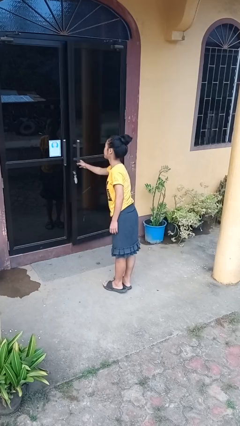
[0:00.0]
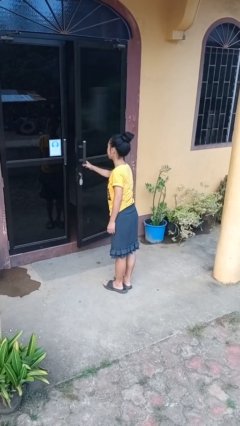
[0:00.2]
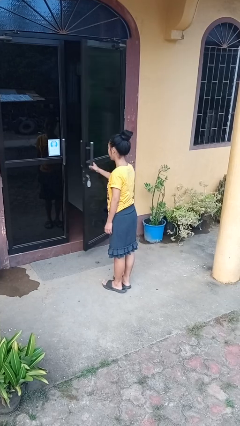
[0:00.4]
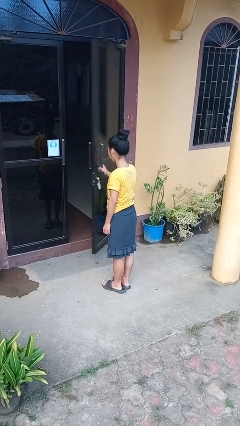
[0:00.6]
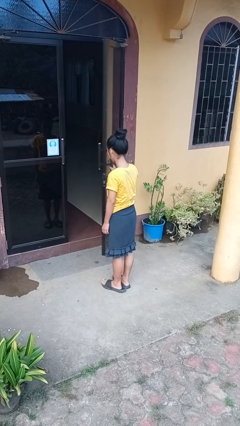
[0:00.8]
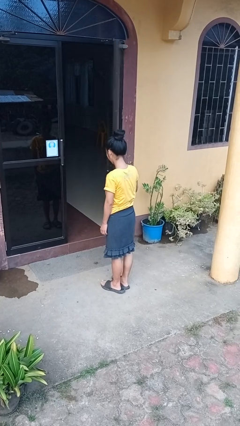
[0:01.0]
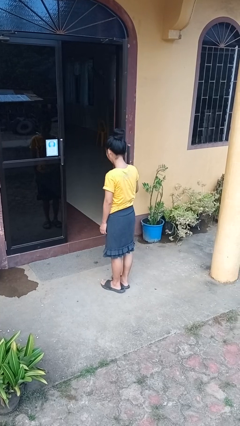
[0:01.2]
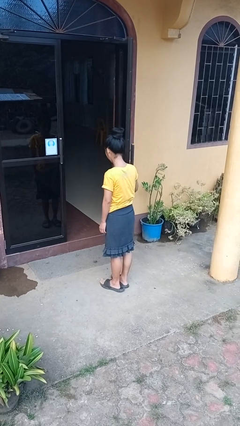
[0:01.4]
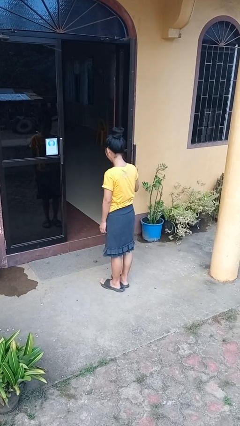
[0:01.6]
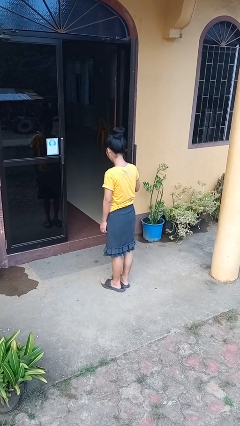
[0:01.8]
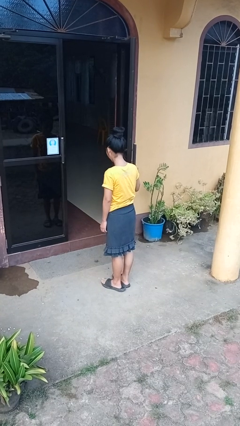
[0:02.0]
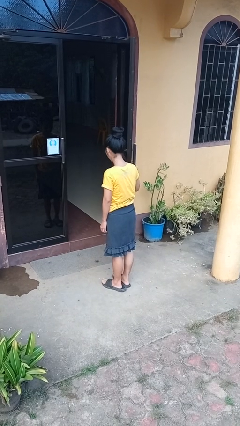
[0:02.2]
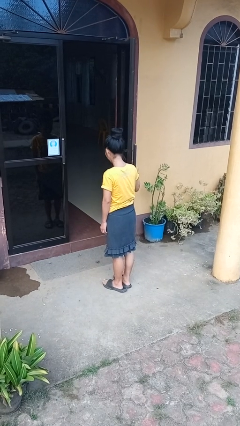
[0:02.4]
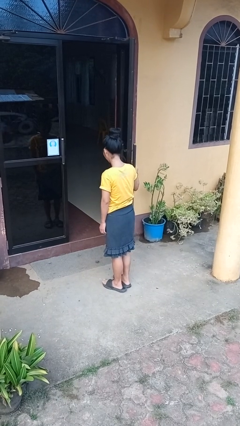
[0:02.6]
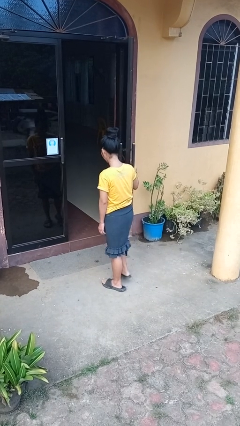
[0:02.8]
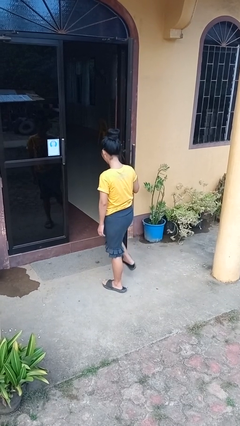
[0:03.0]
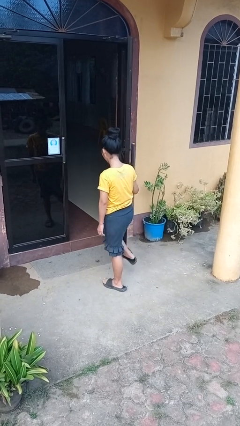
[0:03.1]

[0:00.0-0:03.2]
person opens facility door

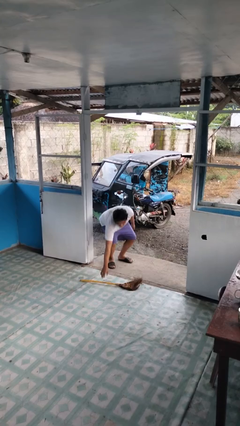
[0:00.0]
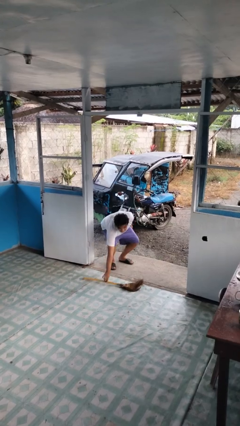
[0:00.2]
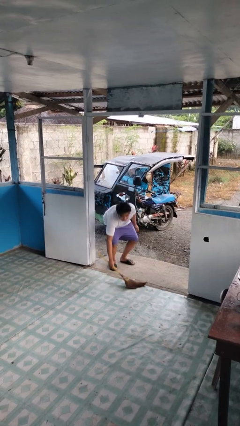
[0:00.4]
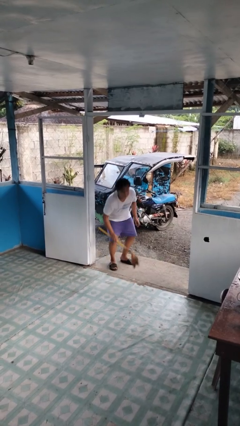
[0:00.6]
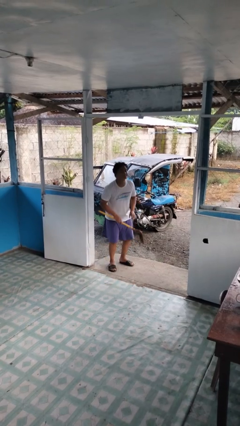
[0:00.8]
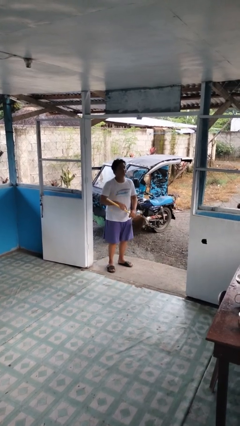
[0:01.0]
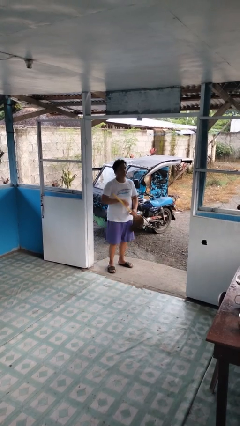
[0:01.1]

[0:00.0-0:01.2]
person picks up object from floor

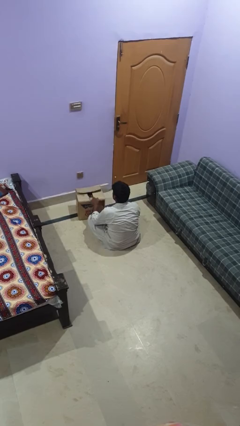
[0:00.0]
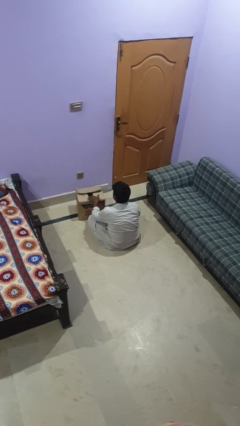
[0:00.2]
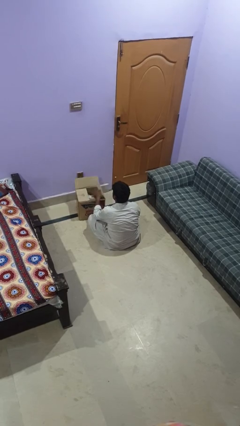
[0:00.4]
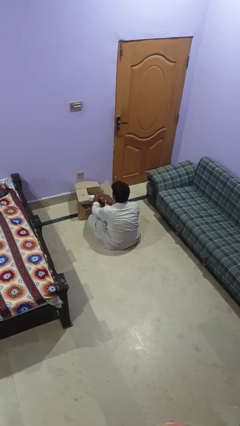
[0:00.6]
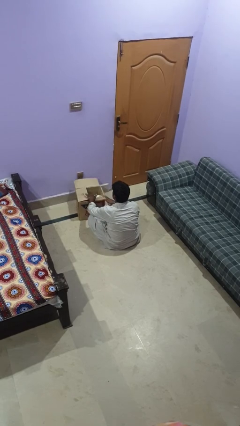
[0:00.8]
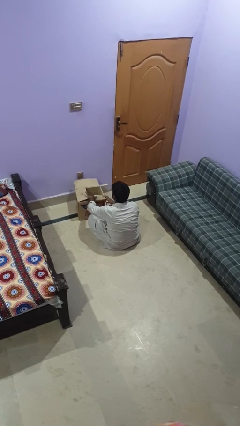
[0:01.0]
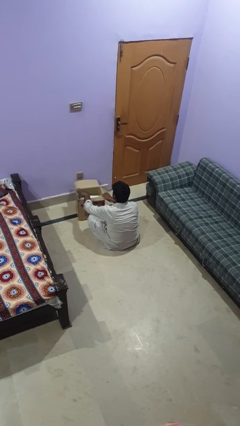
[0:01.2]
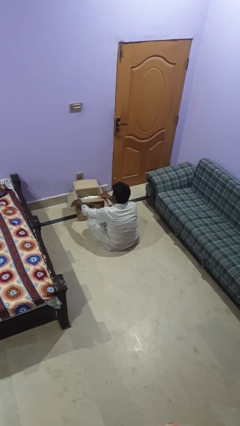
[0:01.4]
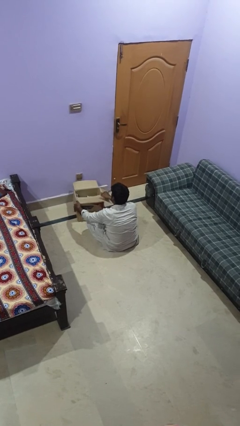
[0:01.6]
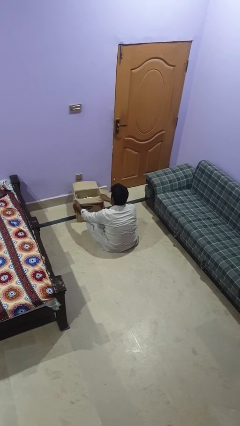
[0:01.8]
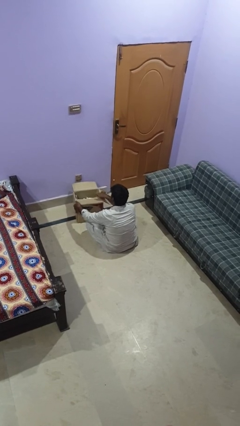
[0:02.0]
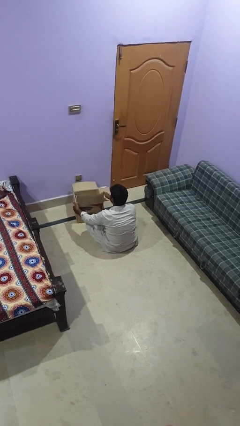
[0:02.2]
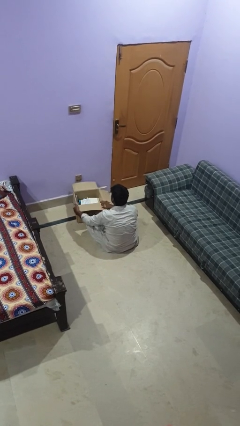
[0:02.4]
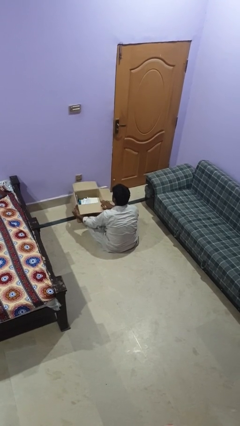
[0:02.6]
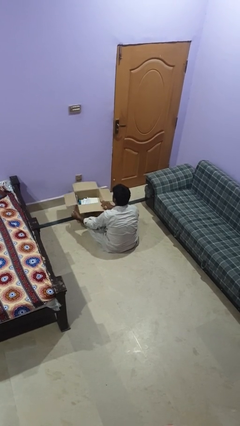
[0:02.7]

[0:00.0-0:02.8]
person opens box

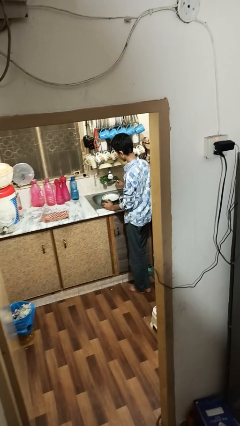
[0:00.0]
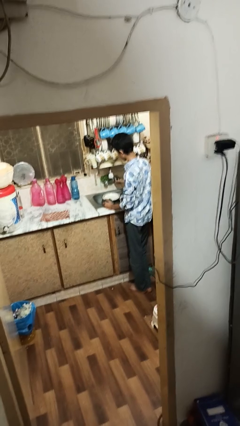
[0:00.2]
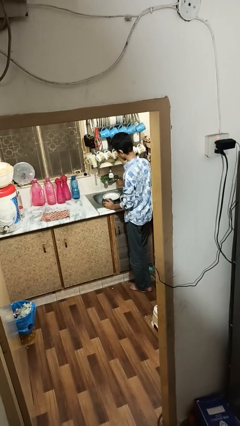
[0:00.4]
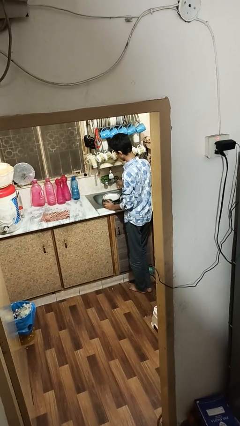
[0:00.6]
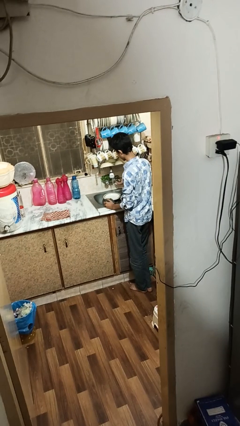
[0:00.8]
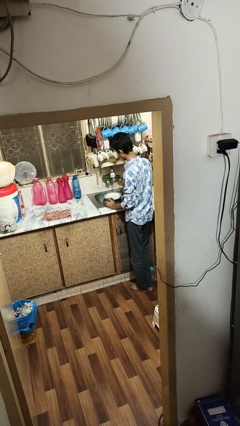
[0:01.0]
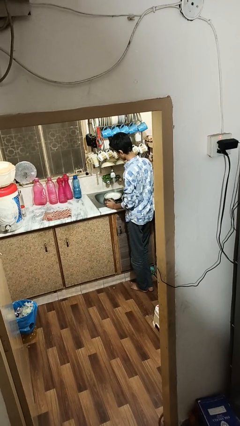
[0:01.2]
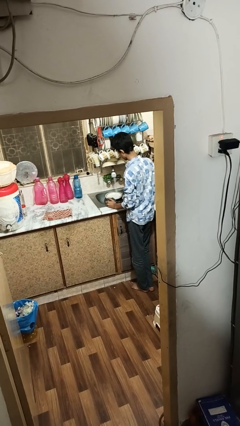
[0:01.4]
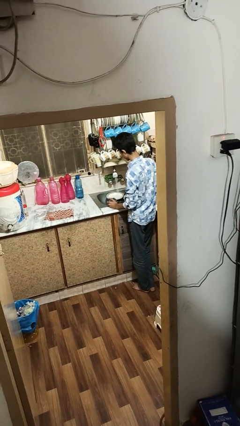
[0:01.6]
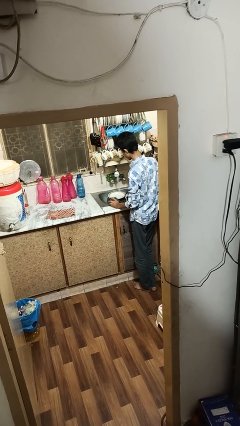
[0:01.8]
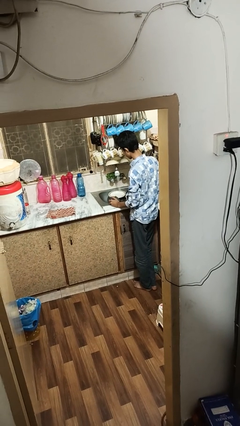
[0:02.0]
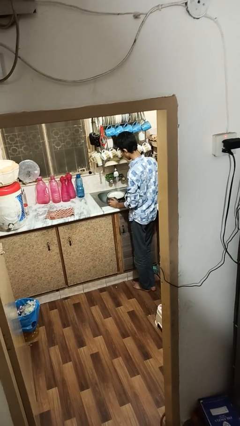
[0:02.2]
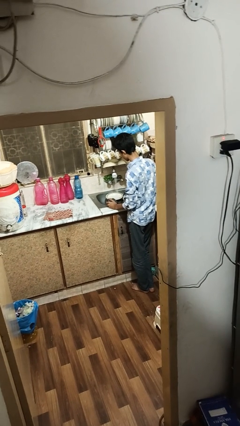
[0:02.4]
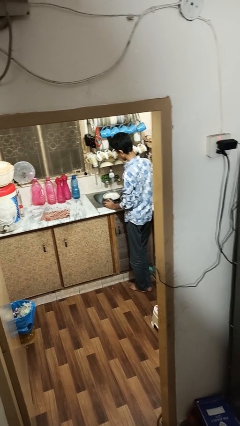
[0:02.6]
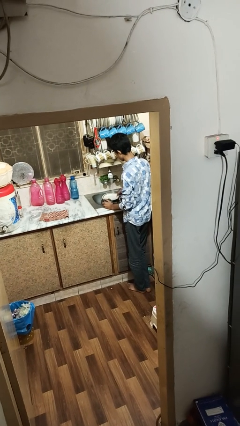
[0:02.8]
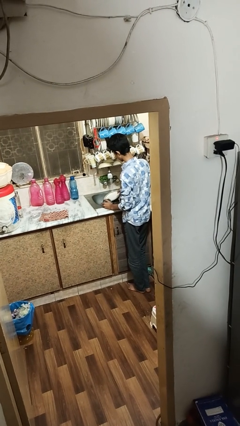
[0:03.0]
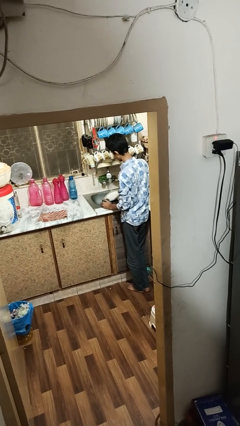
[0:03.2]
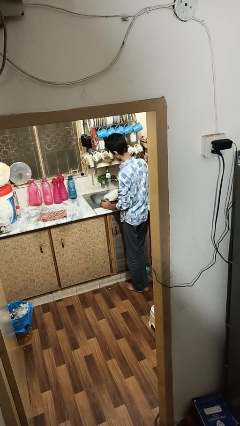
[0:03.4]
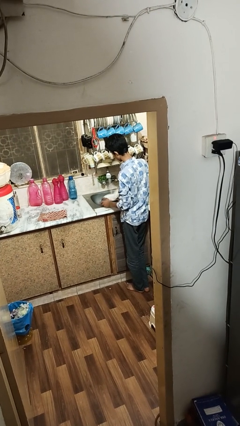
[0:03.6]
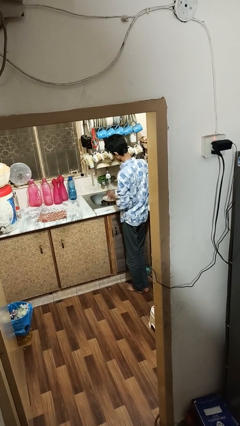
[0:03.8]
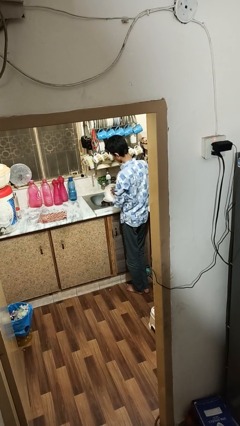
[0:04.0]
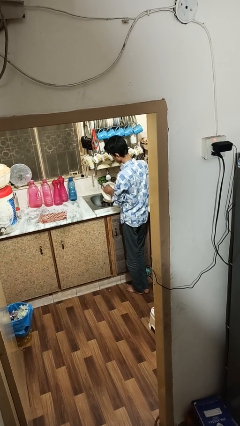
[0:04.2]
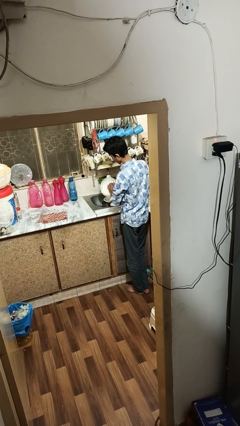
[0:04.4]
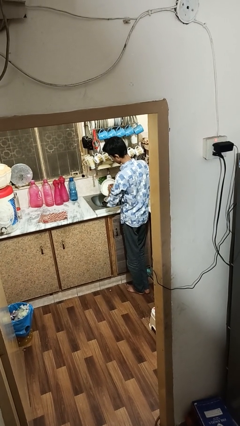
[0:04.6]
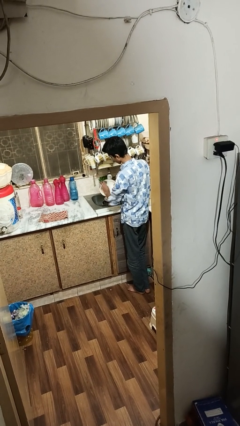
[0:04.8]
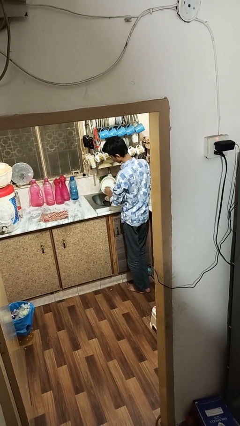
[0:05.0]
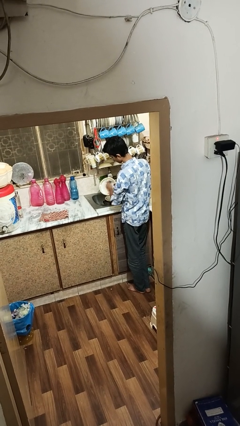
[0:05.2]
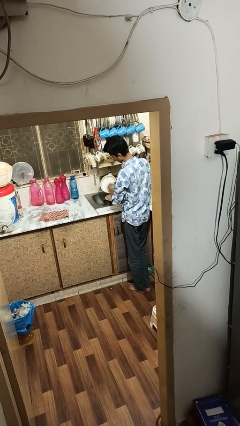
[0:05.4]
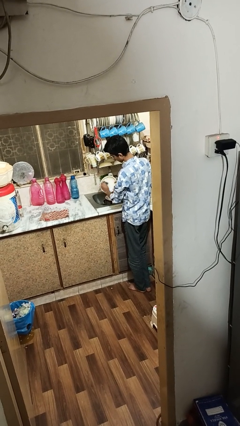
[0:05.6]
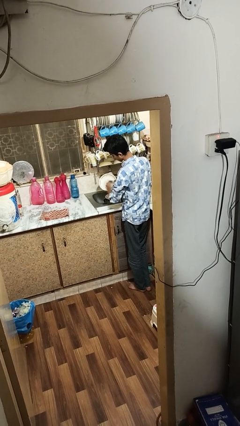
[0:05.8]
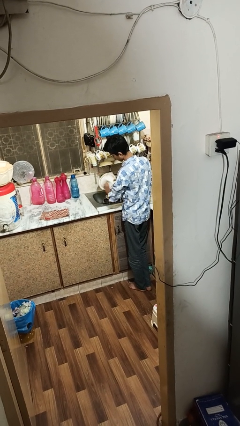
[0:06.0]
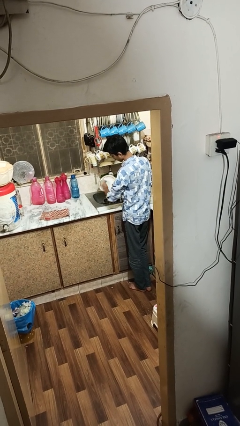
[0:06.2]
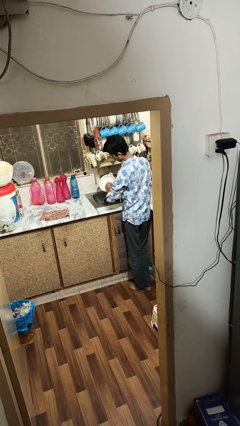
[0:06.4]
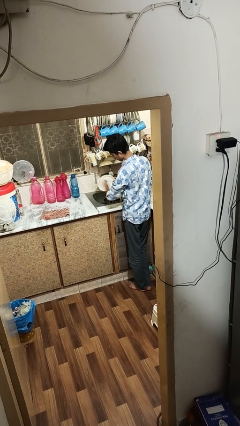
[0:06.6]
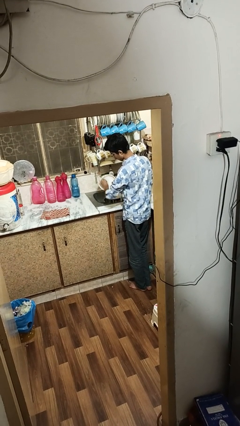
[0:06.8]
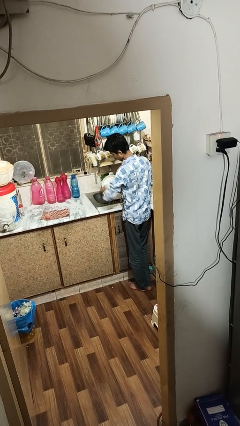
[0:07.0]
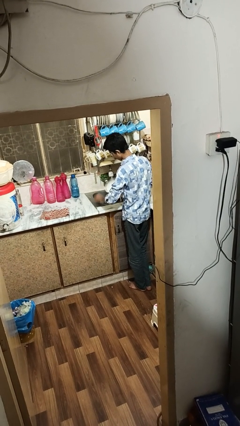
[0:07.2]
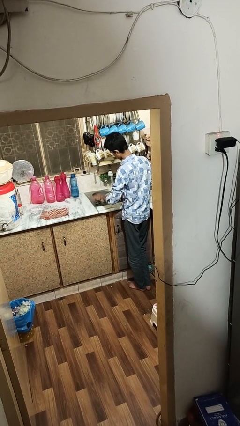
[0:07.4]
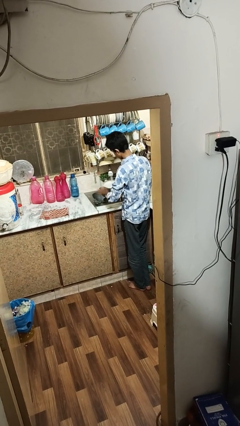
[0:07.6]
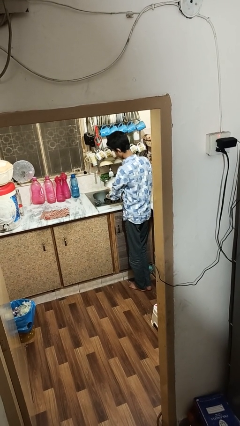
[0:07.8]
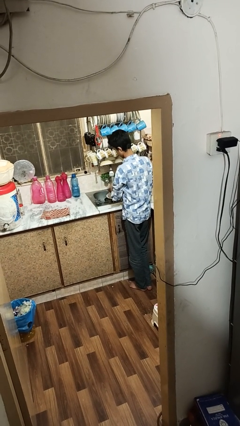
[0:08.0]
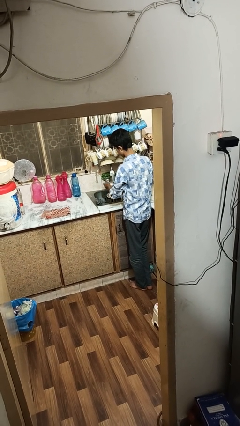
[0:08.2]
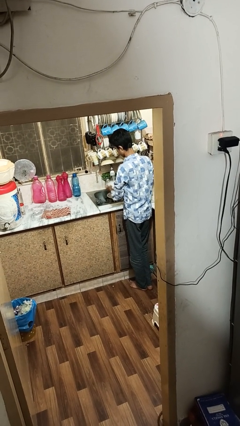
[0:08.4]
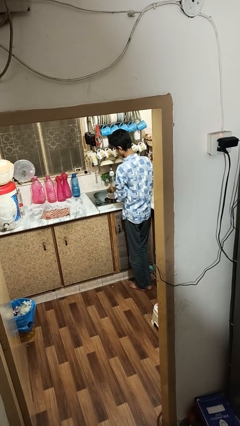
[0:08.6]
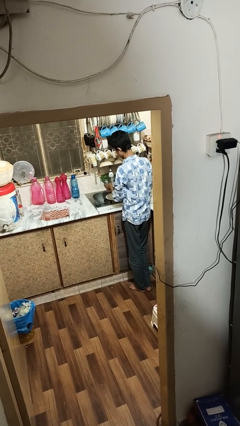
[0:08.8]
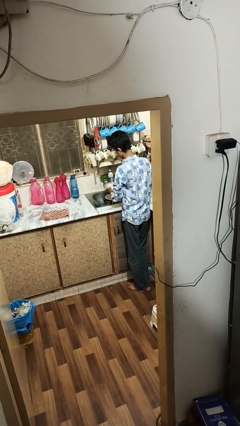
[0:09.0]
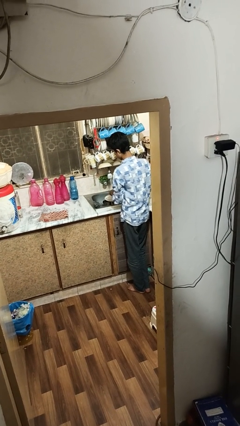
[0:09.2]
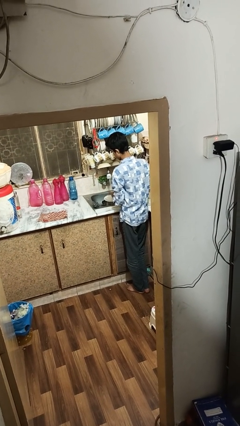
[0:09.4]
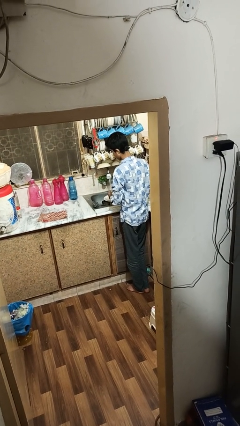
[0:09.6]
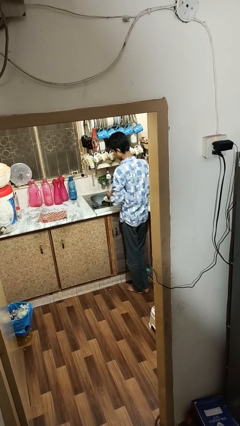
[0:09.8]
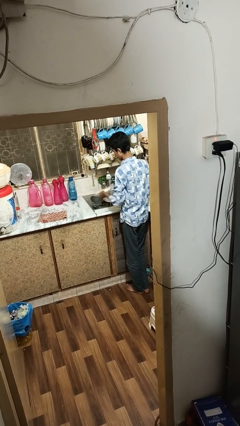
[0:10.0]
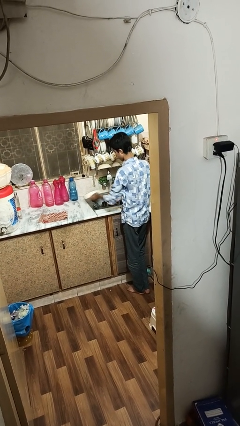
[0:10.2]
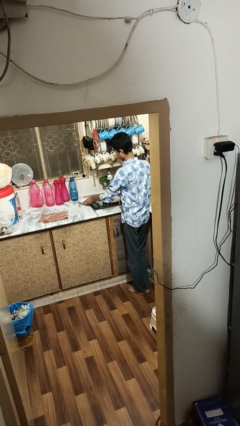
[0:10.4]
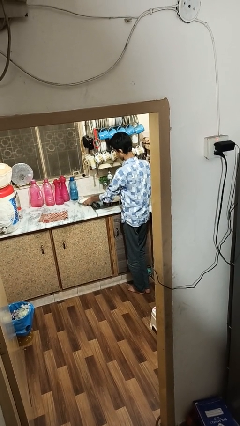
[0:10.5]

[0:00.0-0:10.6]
person washes dish
